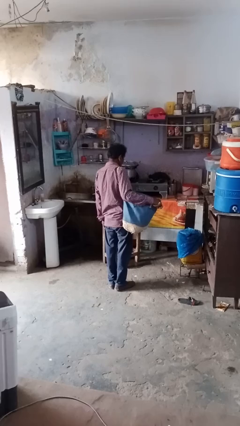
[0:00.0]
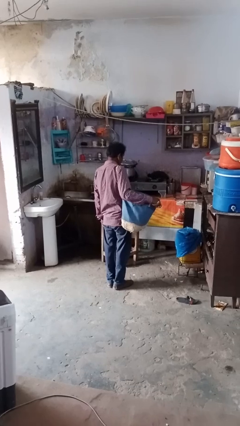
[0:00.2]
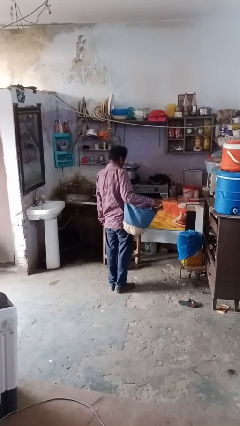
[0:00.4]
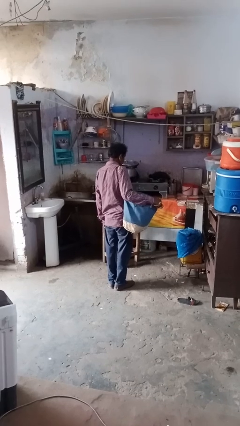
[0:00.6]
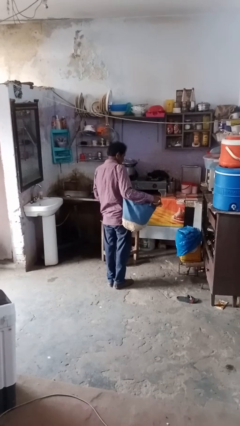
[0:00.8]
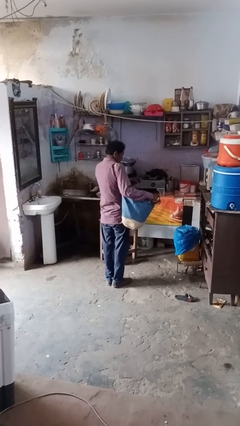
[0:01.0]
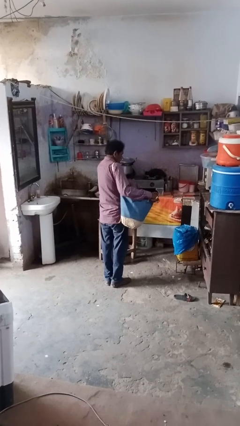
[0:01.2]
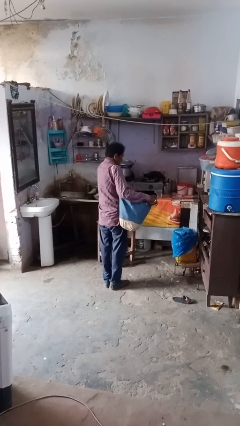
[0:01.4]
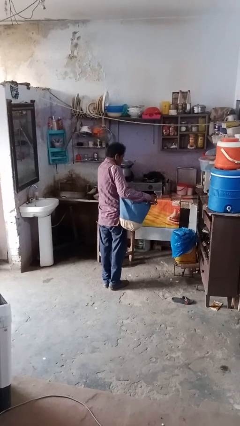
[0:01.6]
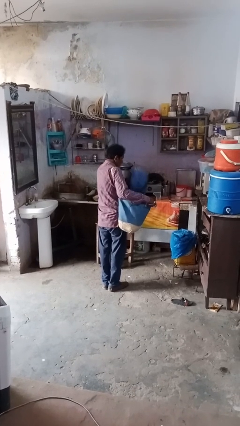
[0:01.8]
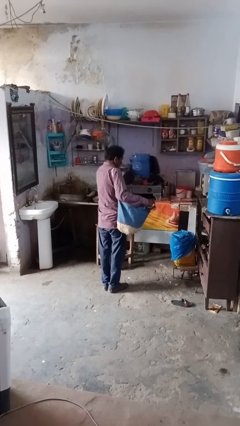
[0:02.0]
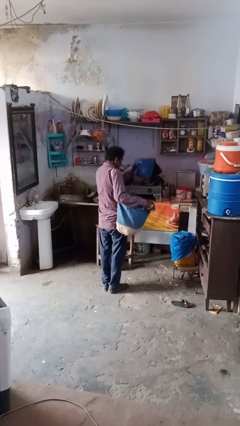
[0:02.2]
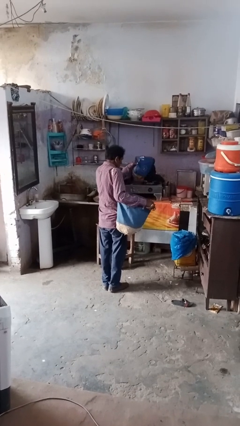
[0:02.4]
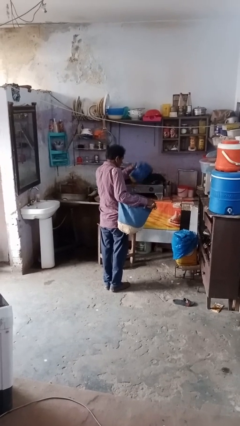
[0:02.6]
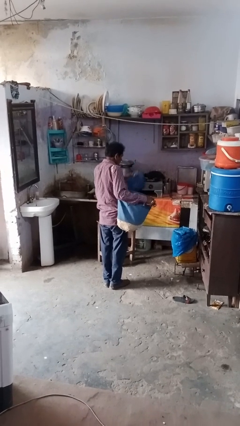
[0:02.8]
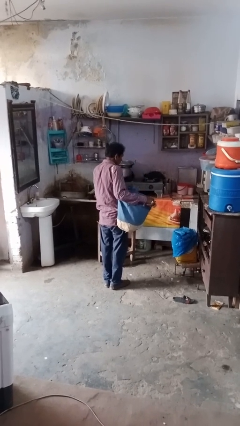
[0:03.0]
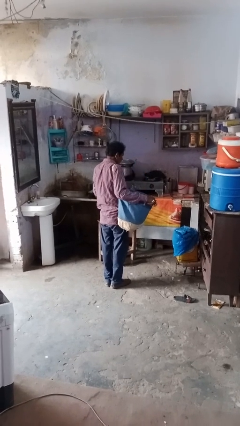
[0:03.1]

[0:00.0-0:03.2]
person takes object from bag

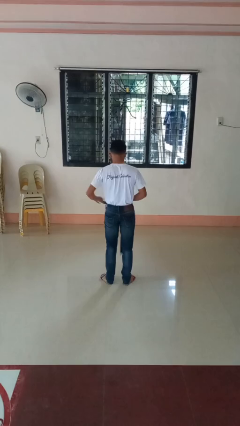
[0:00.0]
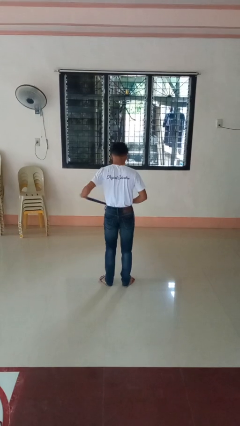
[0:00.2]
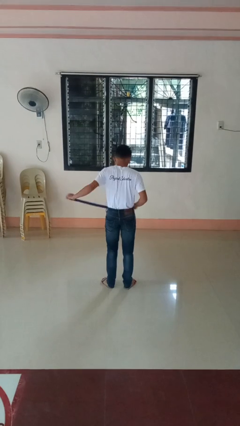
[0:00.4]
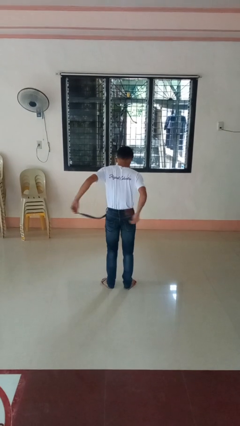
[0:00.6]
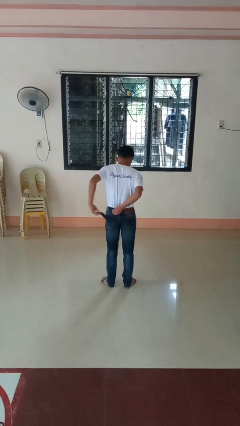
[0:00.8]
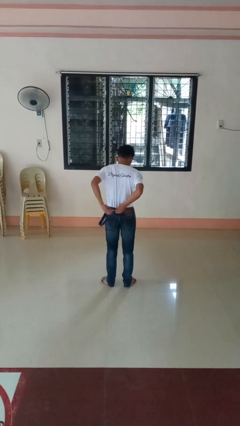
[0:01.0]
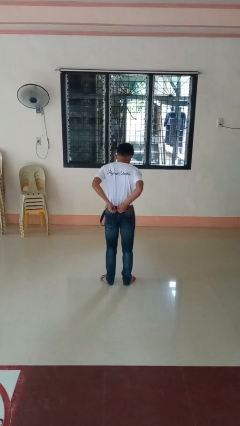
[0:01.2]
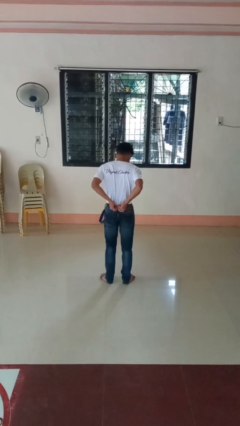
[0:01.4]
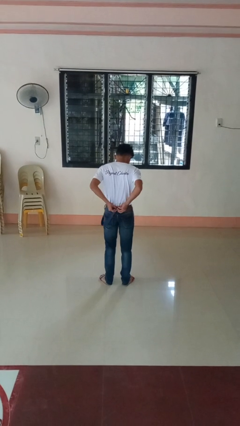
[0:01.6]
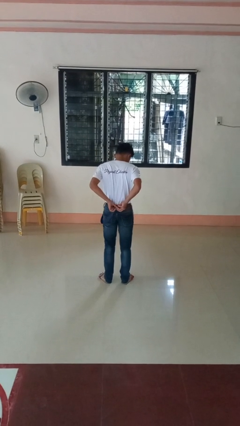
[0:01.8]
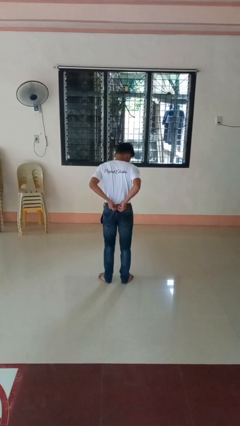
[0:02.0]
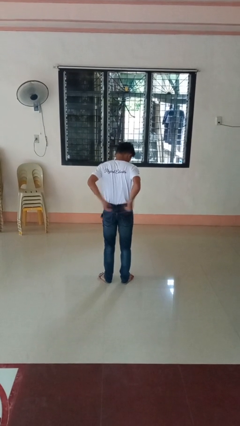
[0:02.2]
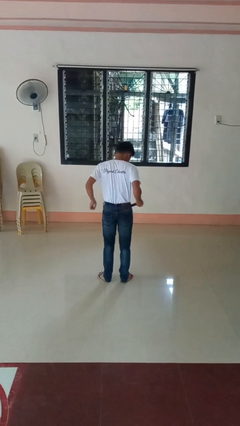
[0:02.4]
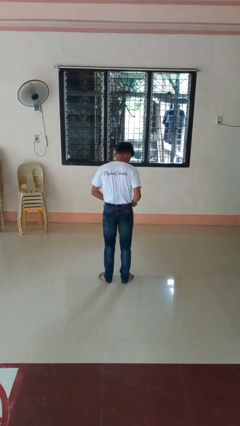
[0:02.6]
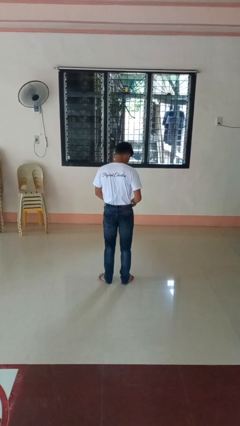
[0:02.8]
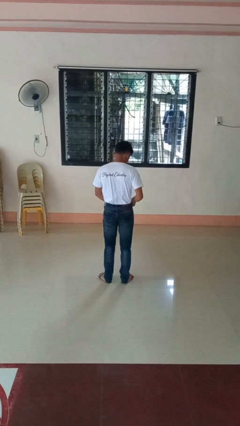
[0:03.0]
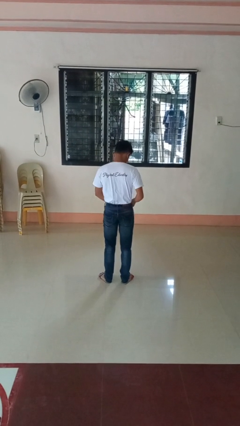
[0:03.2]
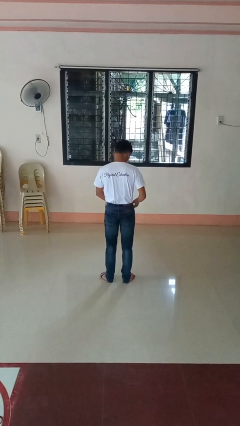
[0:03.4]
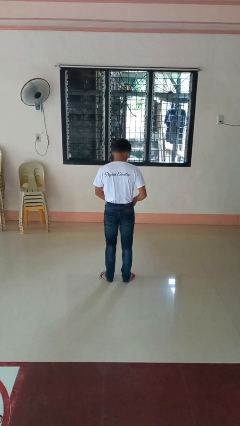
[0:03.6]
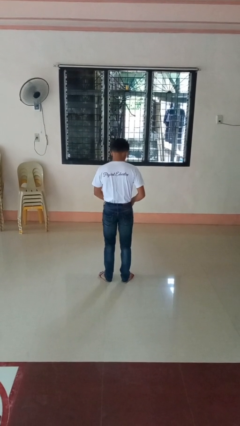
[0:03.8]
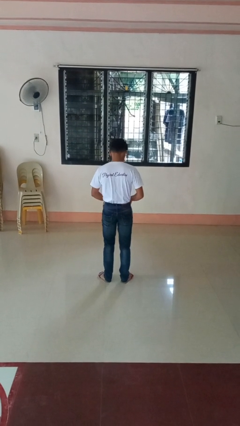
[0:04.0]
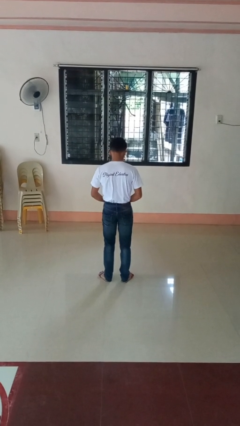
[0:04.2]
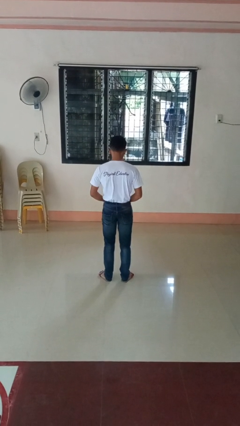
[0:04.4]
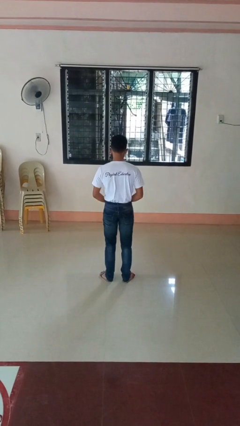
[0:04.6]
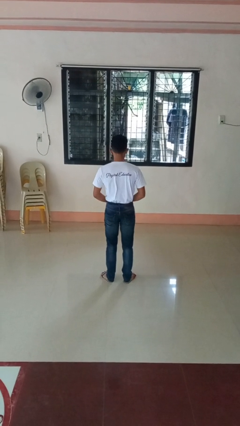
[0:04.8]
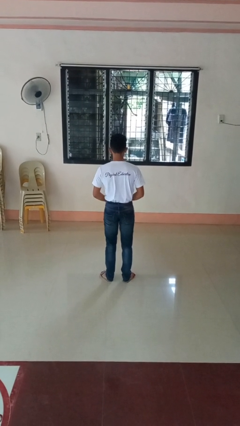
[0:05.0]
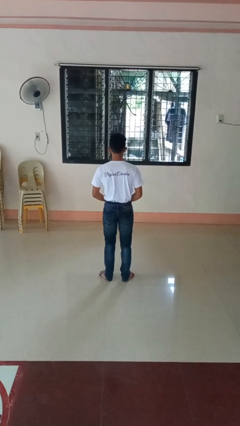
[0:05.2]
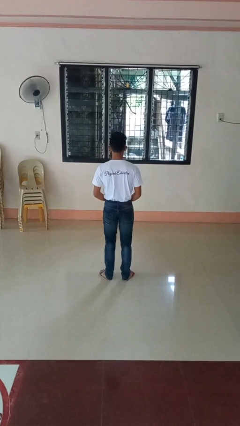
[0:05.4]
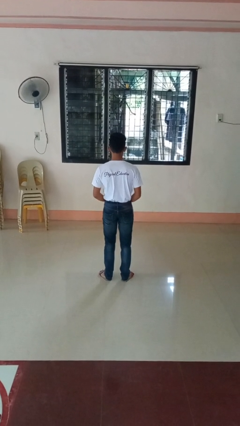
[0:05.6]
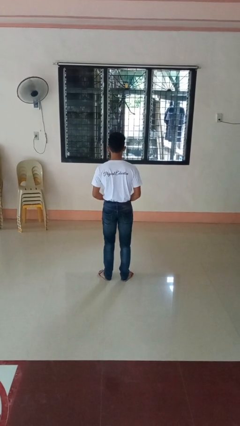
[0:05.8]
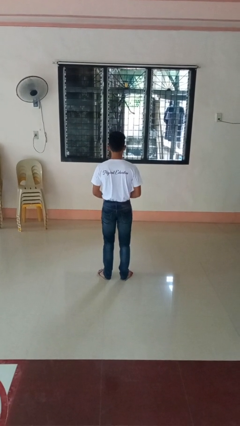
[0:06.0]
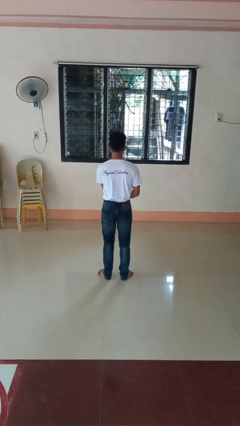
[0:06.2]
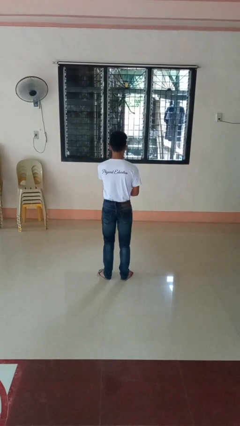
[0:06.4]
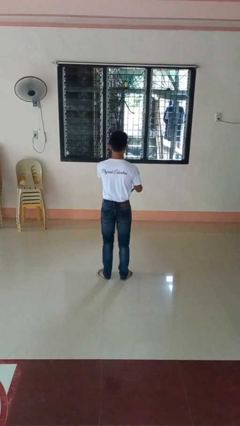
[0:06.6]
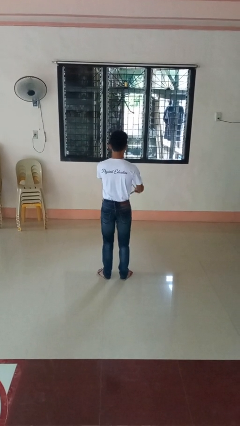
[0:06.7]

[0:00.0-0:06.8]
person puts on belt

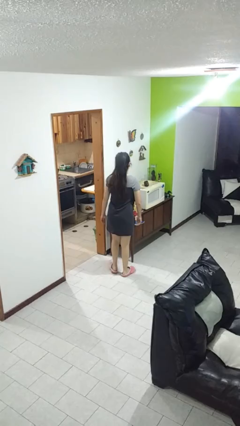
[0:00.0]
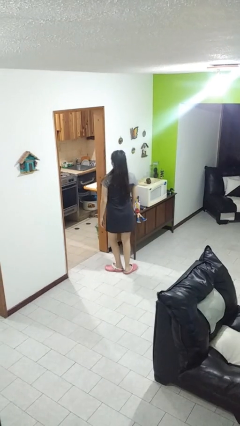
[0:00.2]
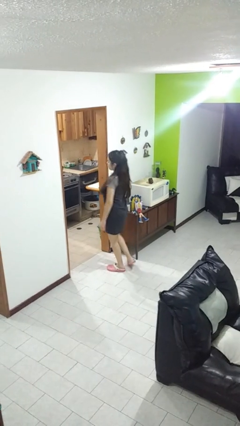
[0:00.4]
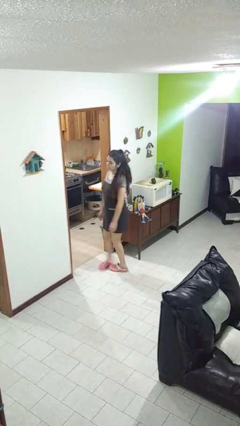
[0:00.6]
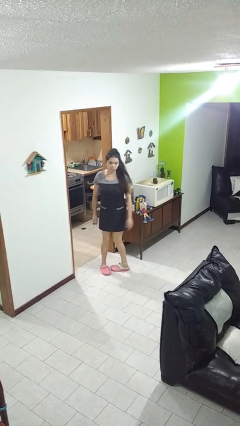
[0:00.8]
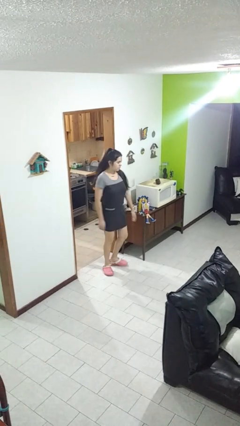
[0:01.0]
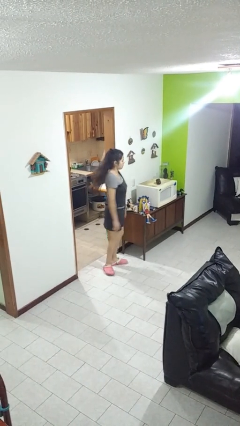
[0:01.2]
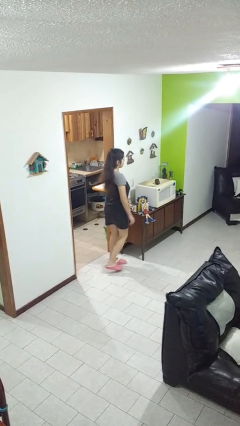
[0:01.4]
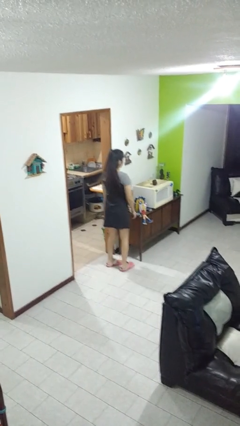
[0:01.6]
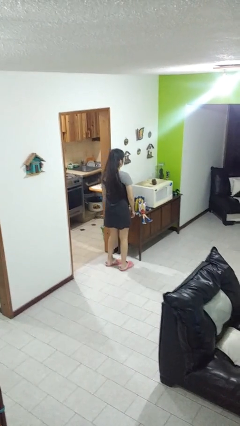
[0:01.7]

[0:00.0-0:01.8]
person twirls

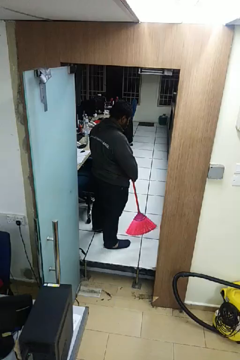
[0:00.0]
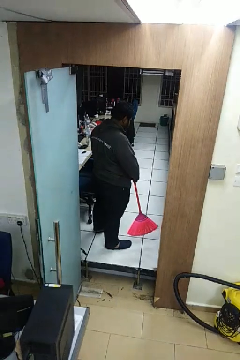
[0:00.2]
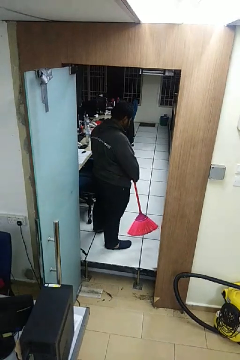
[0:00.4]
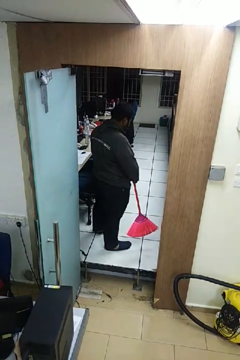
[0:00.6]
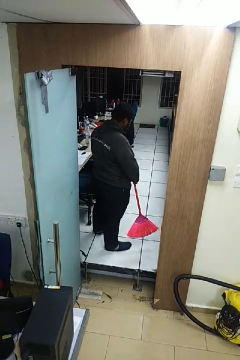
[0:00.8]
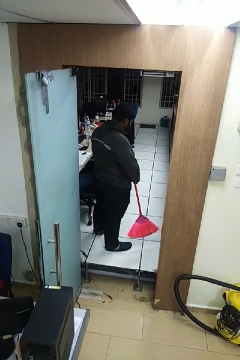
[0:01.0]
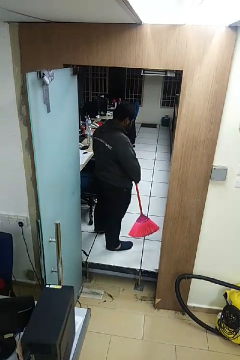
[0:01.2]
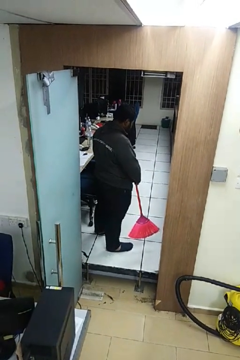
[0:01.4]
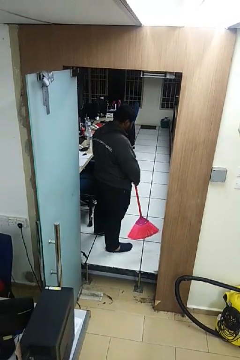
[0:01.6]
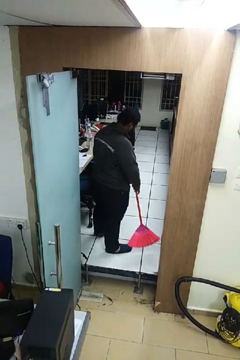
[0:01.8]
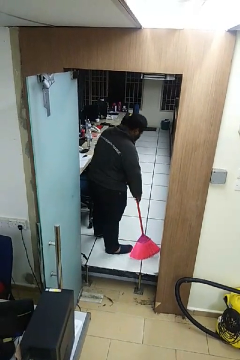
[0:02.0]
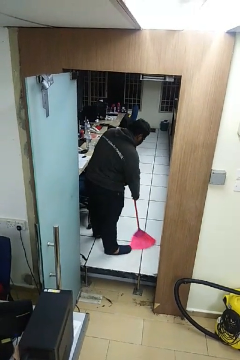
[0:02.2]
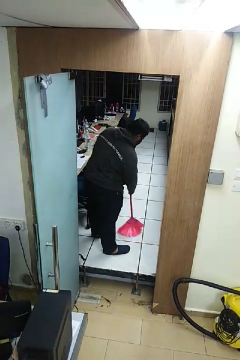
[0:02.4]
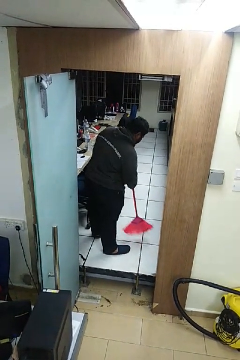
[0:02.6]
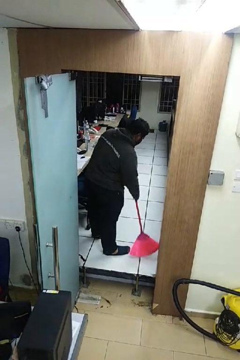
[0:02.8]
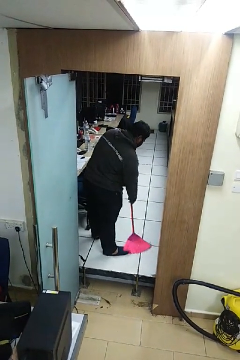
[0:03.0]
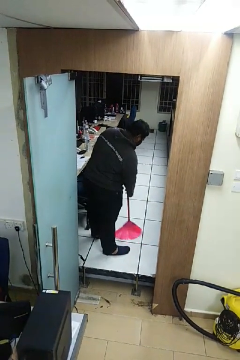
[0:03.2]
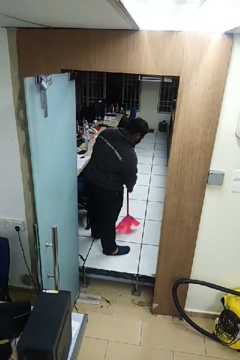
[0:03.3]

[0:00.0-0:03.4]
person sweeps floor

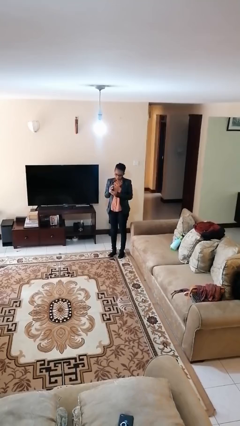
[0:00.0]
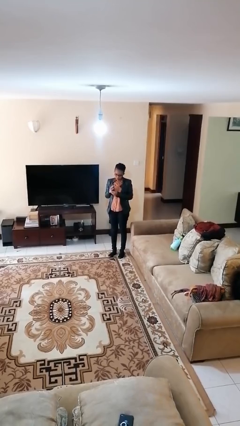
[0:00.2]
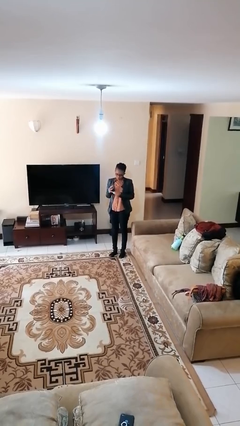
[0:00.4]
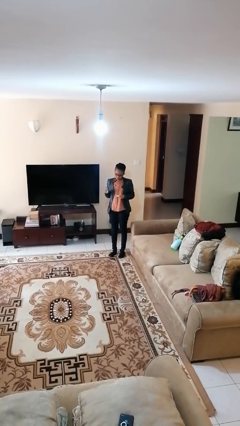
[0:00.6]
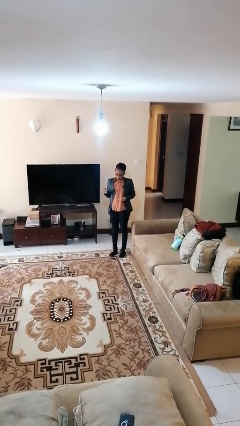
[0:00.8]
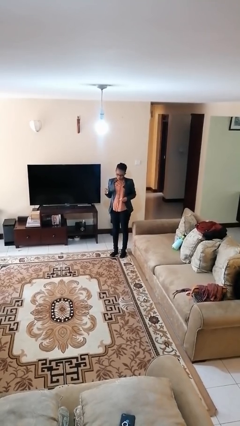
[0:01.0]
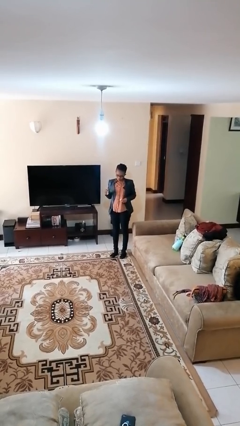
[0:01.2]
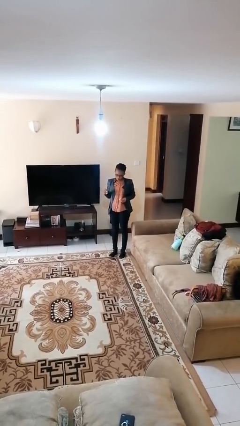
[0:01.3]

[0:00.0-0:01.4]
person takes off ring

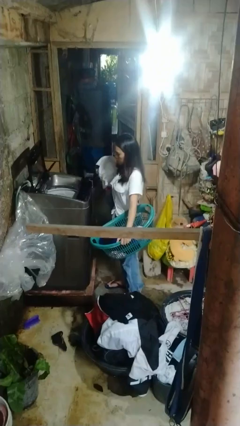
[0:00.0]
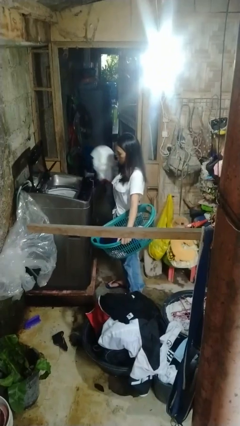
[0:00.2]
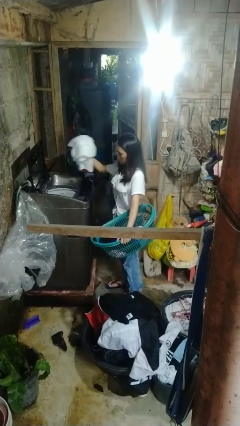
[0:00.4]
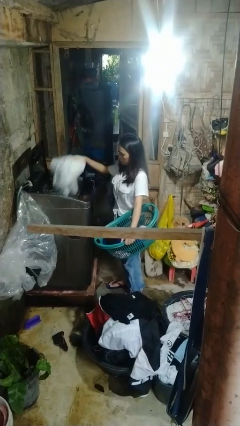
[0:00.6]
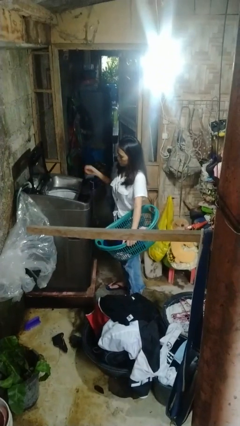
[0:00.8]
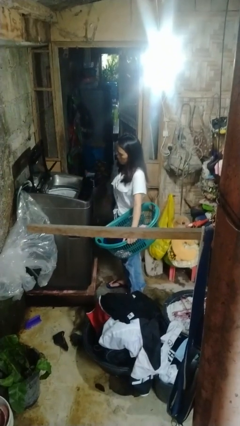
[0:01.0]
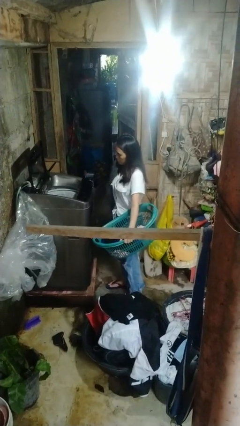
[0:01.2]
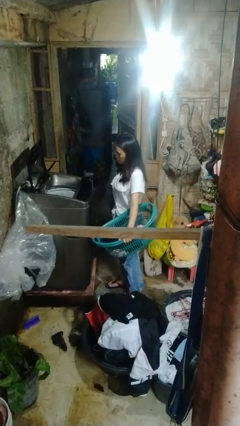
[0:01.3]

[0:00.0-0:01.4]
person loads clotheswasher
